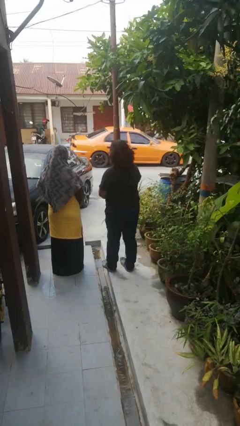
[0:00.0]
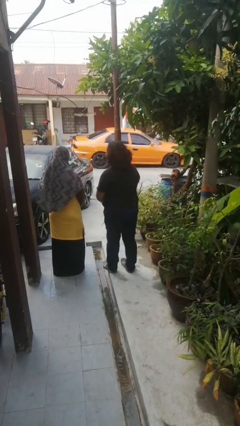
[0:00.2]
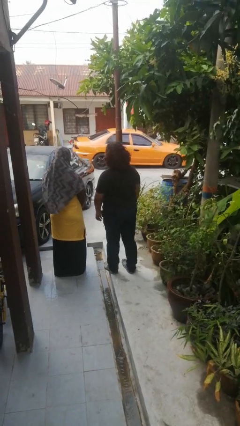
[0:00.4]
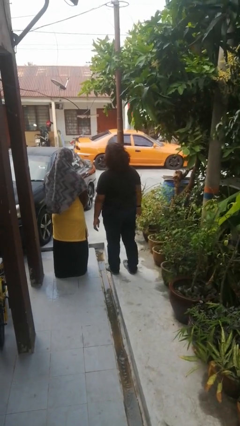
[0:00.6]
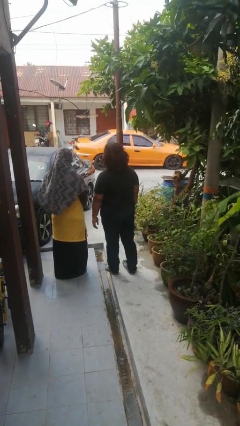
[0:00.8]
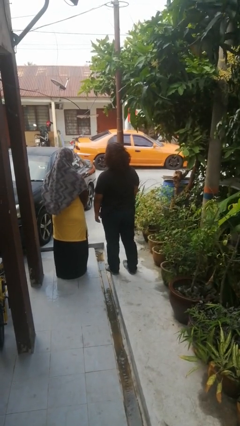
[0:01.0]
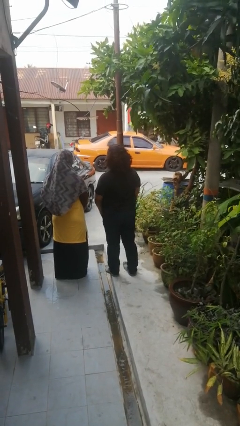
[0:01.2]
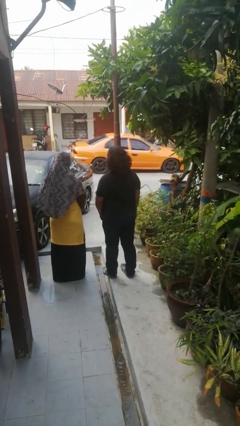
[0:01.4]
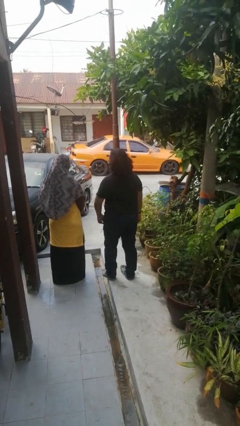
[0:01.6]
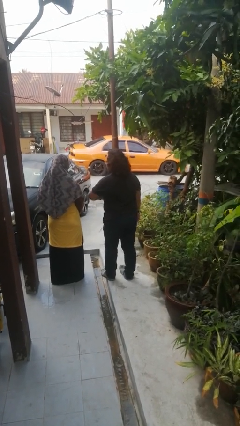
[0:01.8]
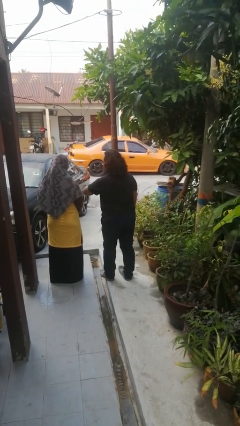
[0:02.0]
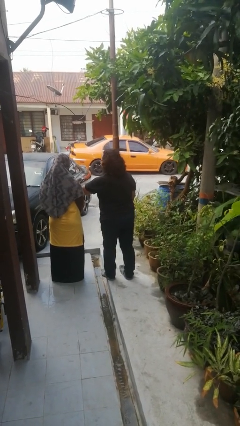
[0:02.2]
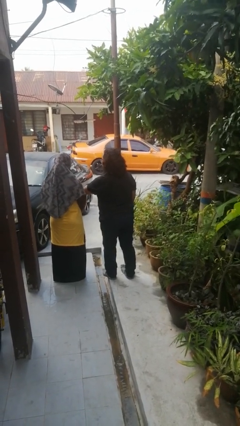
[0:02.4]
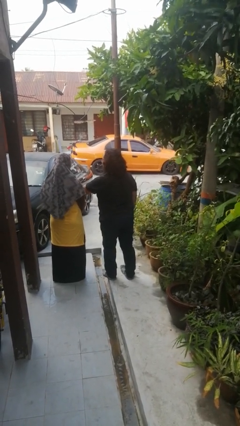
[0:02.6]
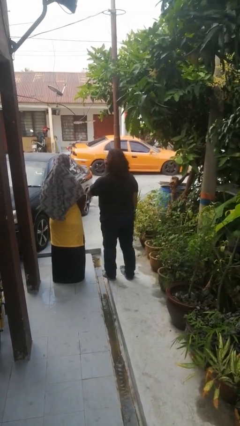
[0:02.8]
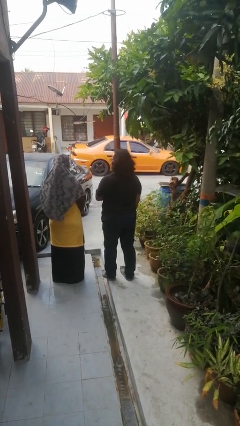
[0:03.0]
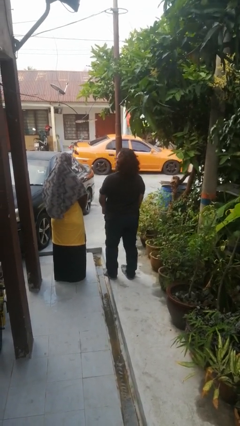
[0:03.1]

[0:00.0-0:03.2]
person nudges person with elbow

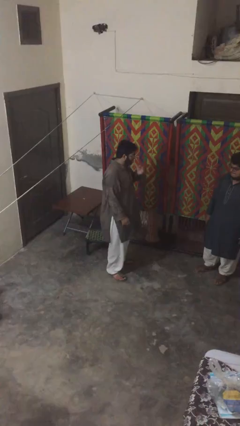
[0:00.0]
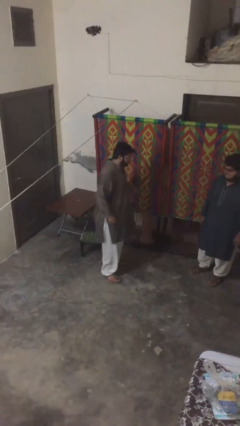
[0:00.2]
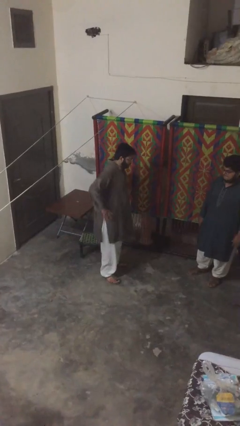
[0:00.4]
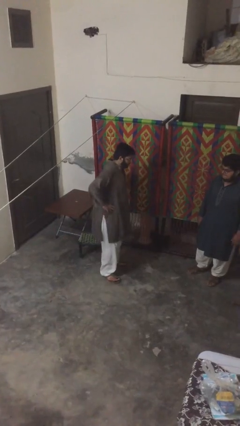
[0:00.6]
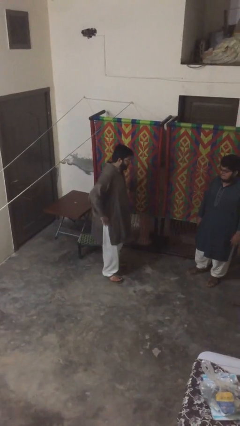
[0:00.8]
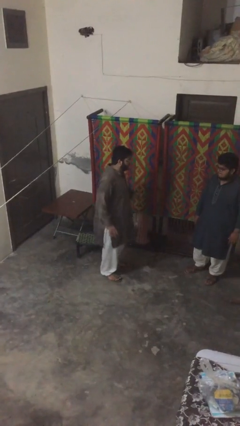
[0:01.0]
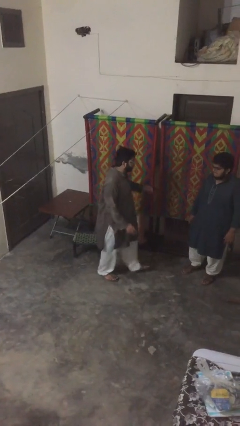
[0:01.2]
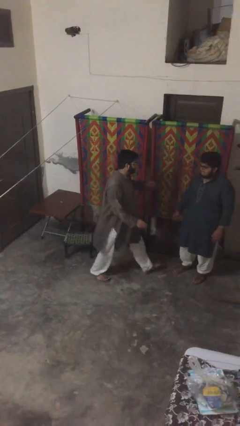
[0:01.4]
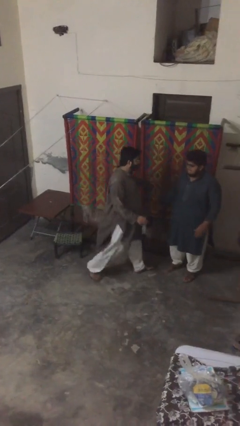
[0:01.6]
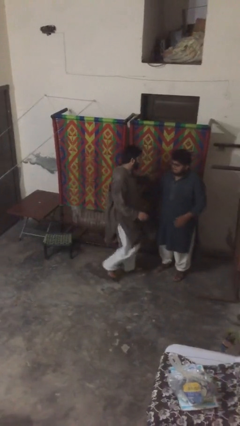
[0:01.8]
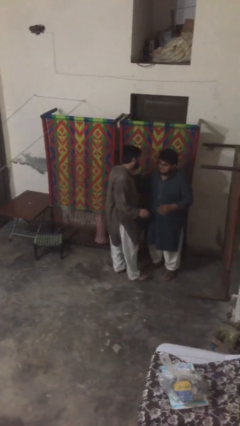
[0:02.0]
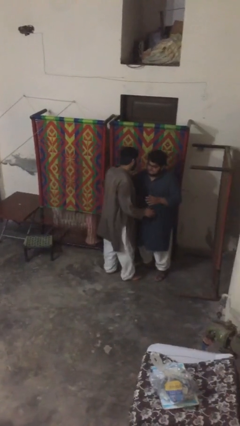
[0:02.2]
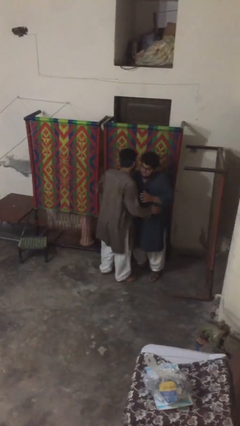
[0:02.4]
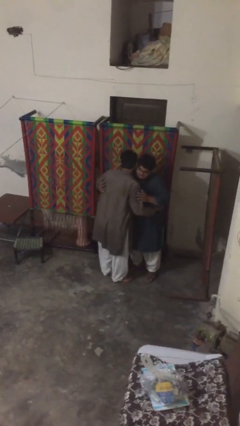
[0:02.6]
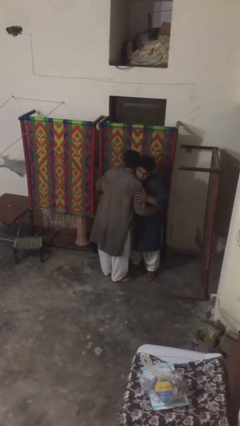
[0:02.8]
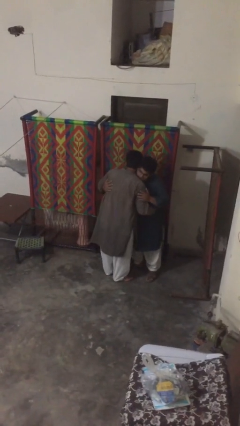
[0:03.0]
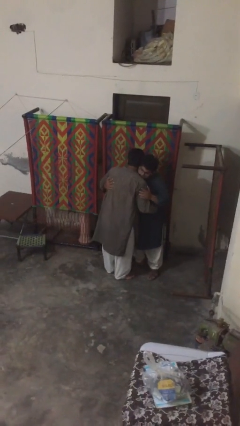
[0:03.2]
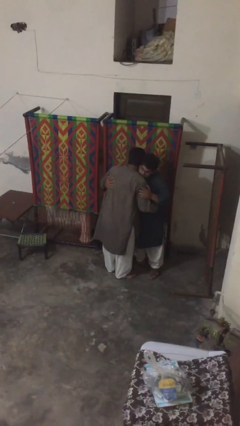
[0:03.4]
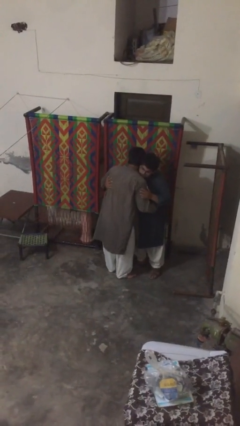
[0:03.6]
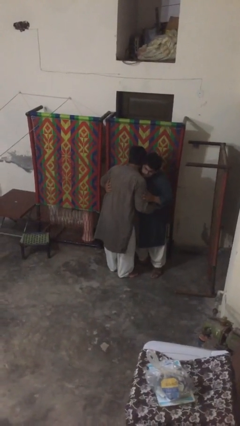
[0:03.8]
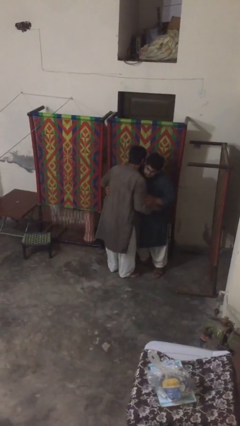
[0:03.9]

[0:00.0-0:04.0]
person embraces person

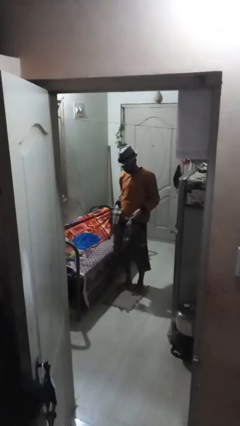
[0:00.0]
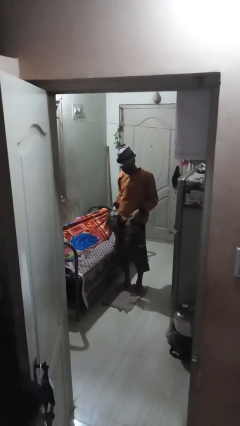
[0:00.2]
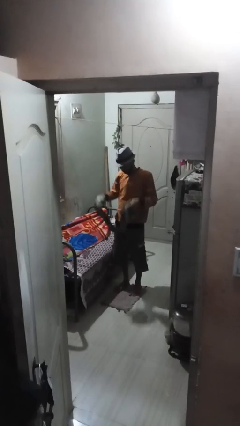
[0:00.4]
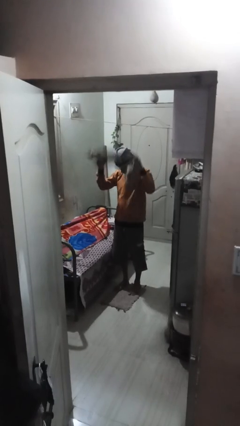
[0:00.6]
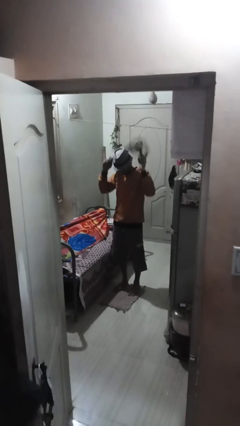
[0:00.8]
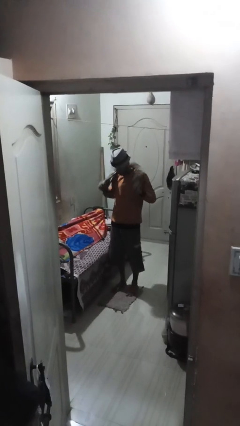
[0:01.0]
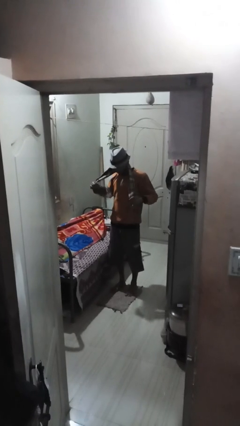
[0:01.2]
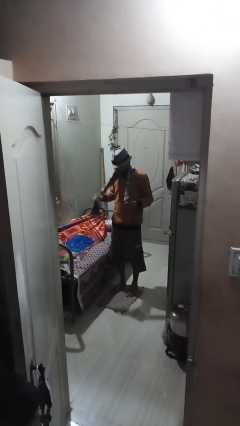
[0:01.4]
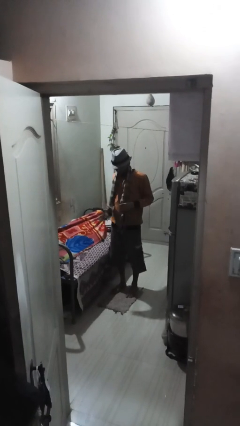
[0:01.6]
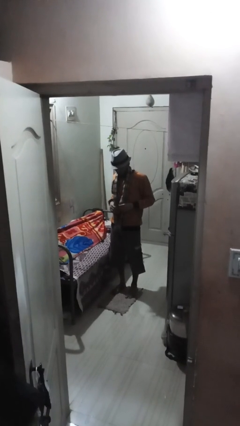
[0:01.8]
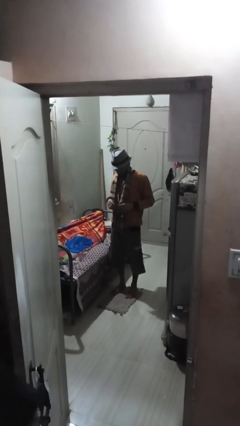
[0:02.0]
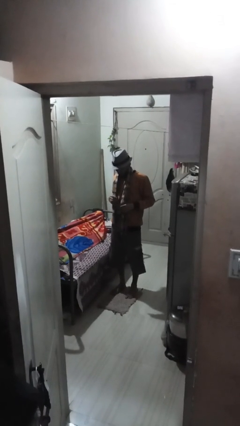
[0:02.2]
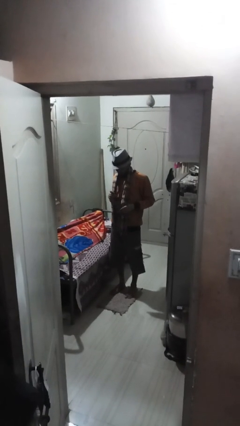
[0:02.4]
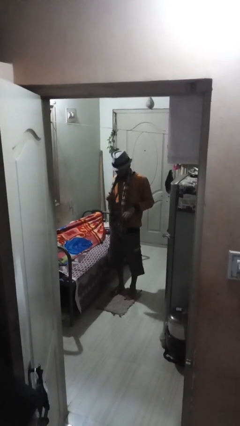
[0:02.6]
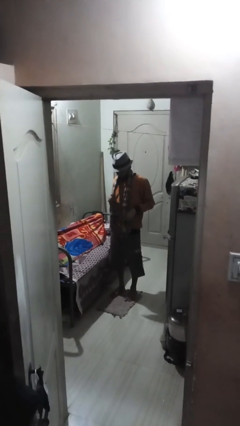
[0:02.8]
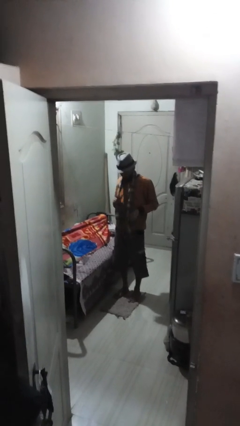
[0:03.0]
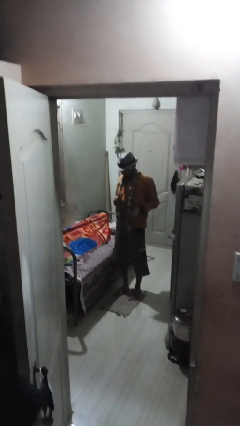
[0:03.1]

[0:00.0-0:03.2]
person puts on scarf

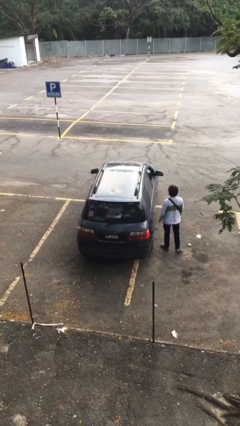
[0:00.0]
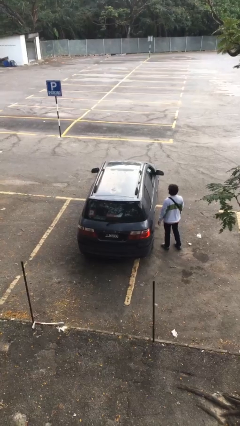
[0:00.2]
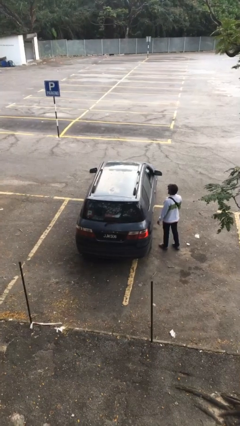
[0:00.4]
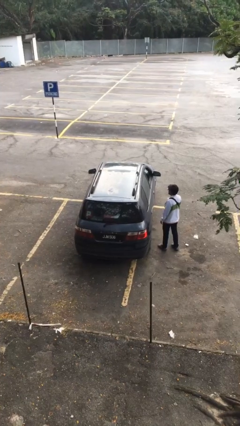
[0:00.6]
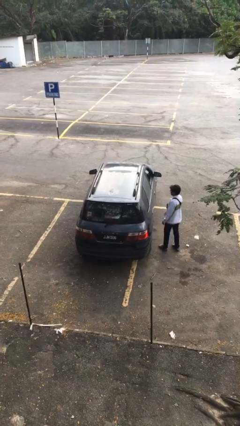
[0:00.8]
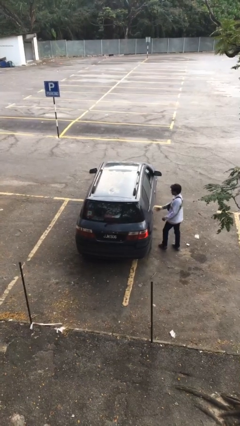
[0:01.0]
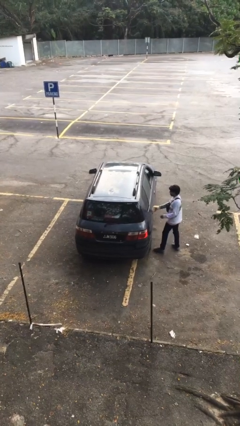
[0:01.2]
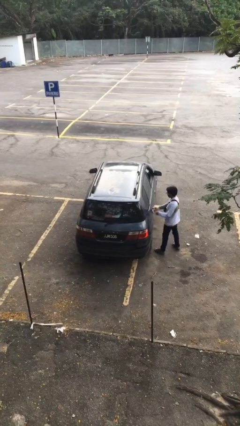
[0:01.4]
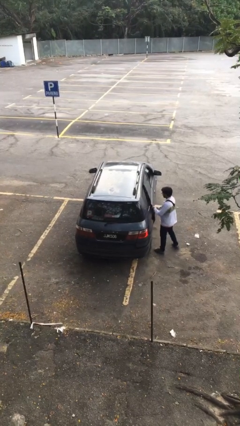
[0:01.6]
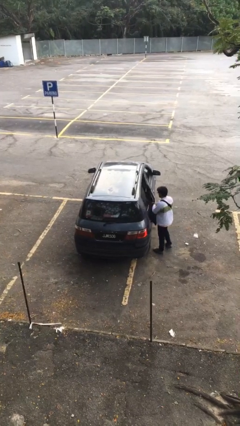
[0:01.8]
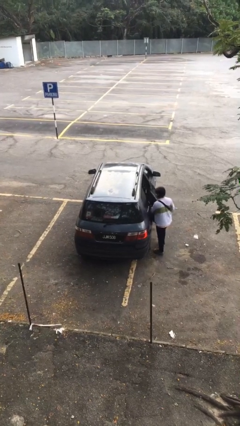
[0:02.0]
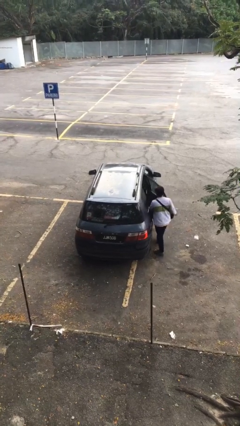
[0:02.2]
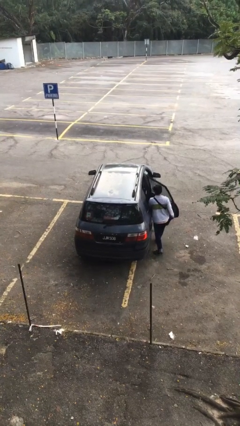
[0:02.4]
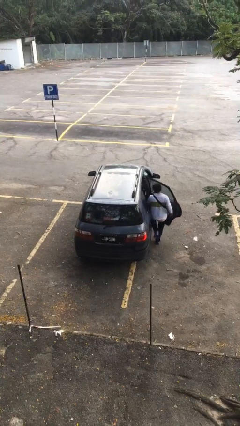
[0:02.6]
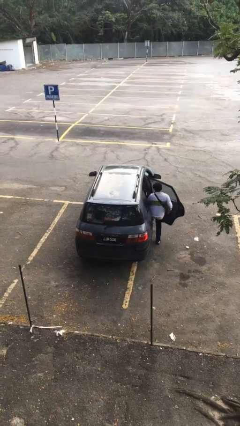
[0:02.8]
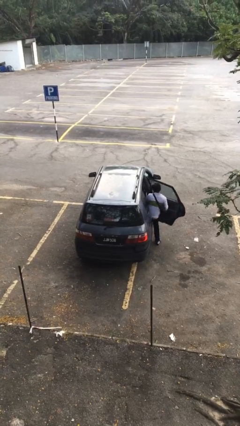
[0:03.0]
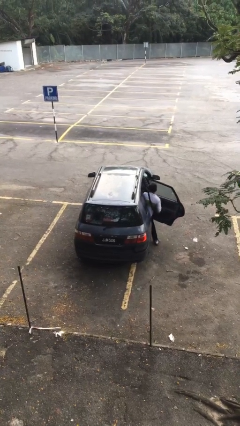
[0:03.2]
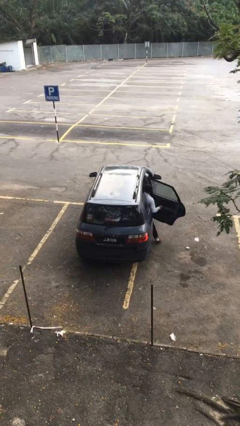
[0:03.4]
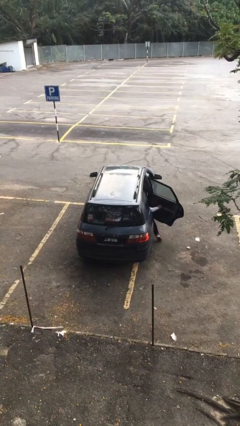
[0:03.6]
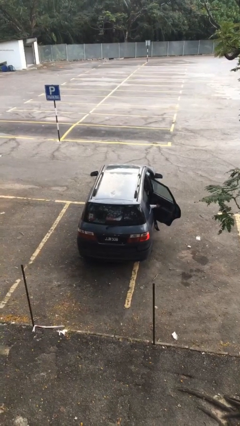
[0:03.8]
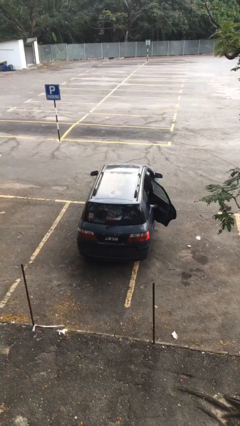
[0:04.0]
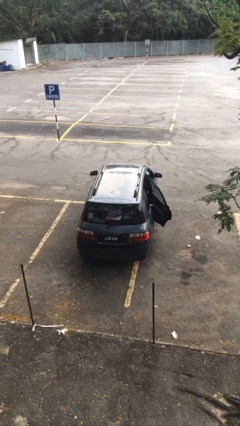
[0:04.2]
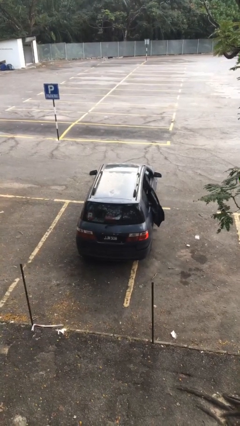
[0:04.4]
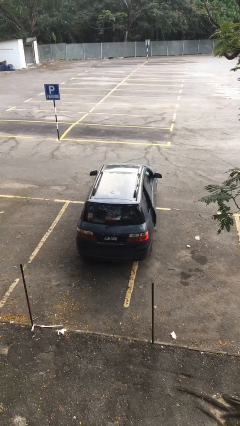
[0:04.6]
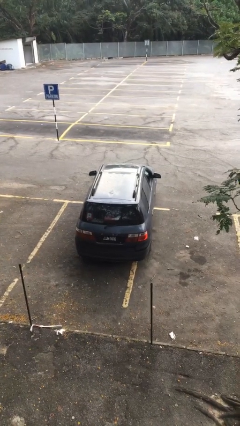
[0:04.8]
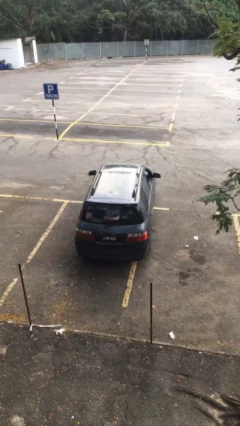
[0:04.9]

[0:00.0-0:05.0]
car picks up person

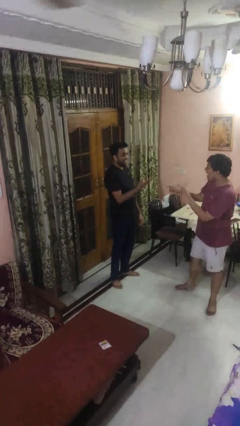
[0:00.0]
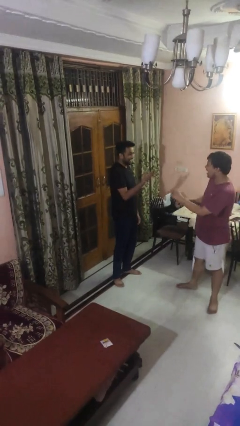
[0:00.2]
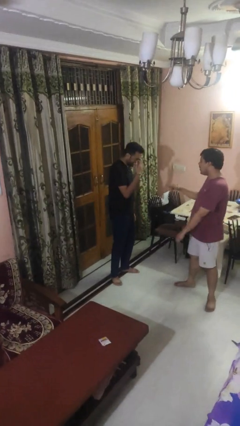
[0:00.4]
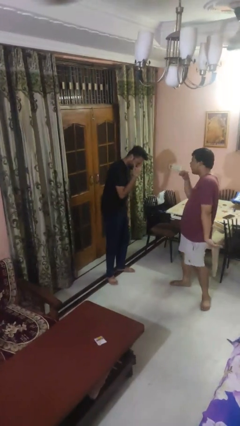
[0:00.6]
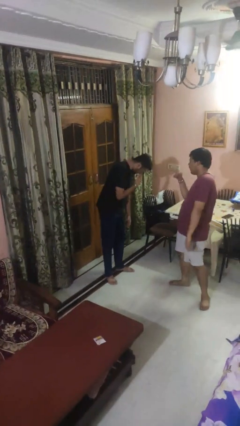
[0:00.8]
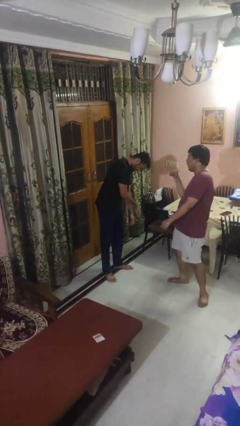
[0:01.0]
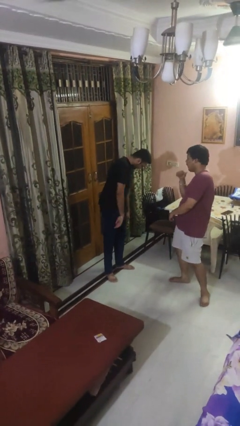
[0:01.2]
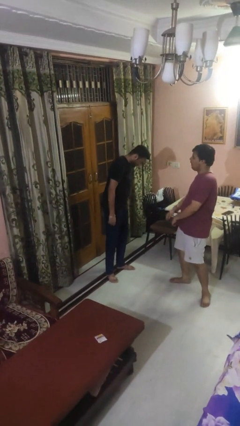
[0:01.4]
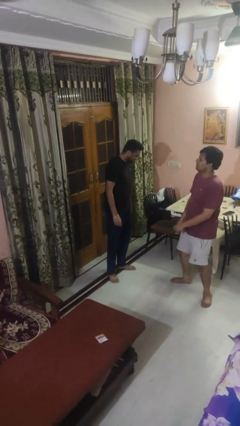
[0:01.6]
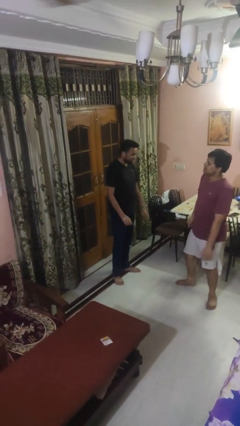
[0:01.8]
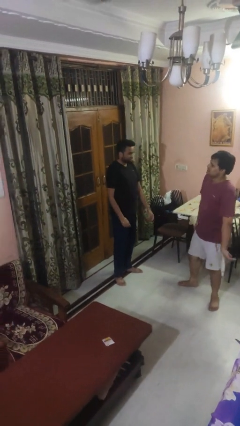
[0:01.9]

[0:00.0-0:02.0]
person laughs with person
